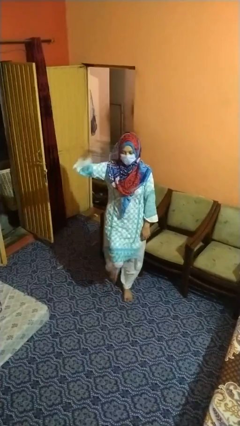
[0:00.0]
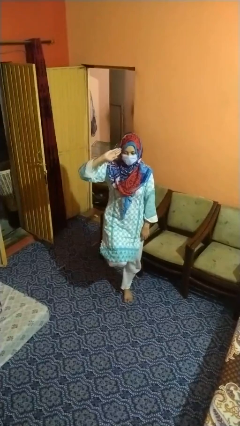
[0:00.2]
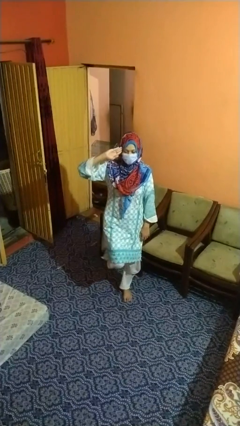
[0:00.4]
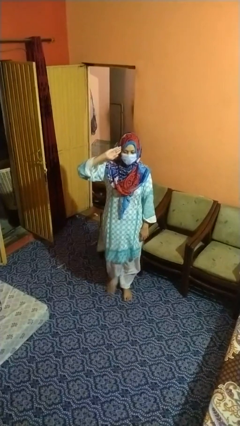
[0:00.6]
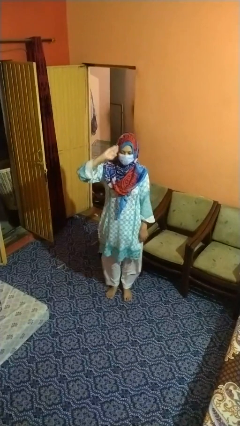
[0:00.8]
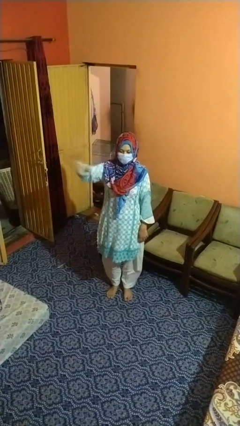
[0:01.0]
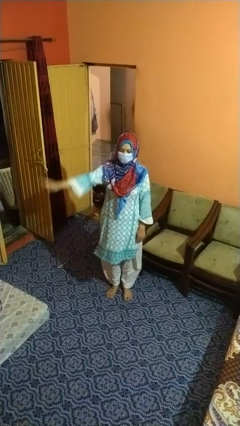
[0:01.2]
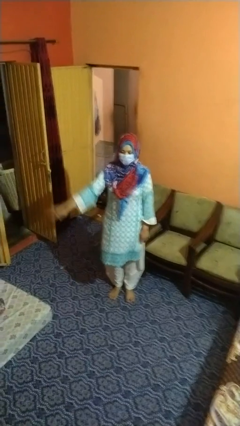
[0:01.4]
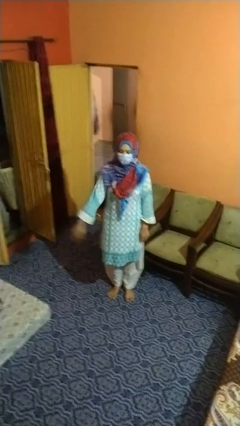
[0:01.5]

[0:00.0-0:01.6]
person salutes

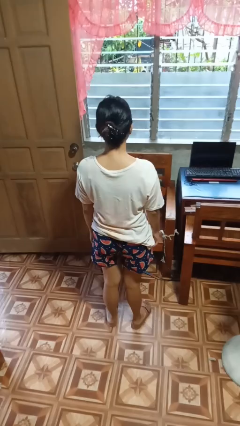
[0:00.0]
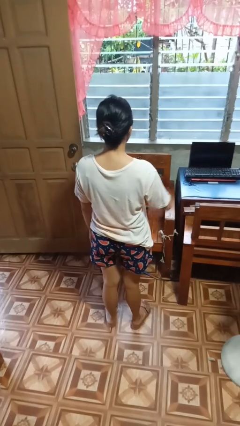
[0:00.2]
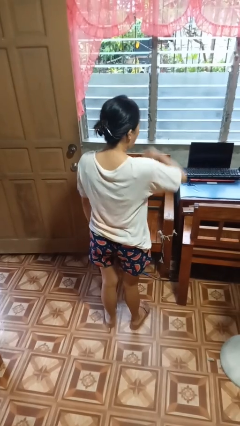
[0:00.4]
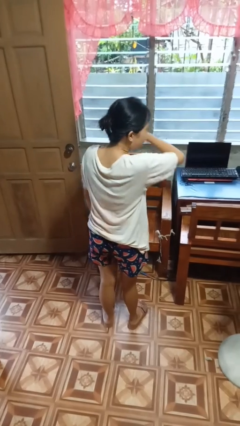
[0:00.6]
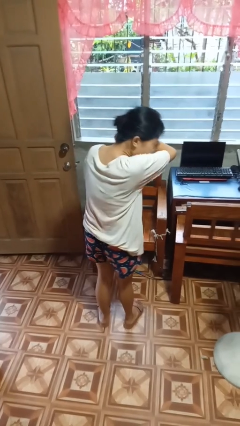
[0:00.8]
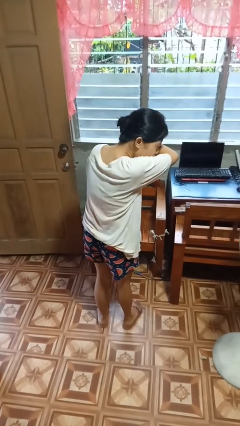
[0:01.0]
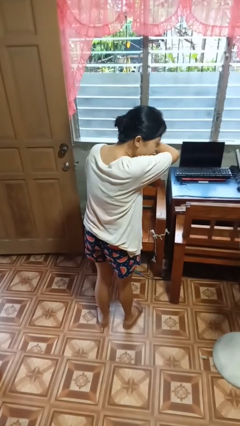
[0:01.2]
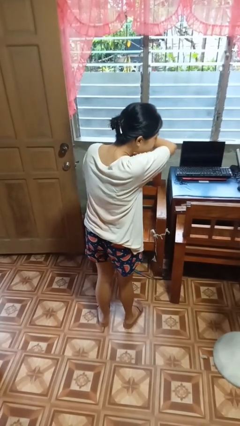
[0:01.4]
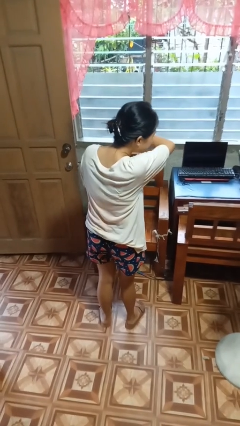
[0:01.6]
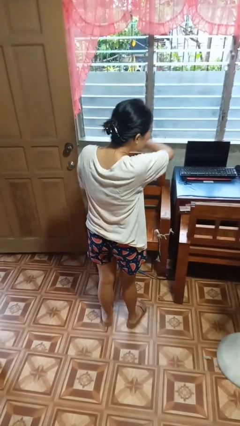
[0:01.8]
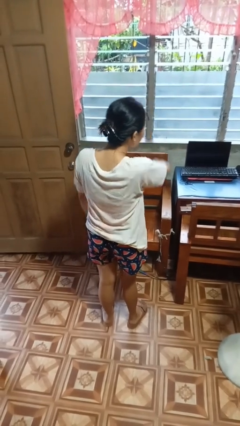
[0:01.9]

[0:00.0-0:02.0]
person sneezes into arm

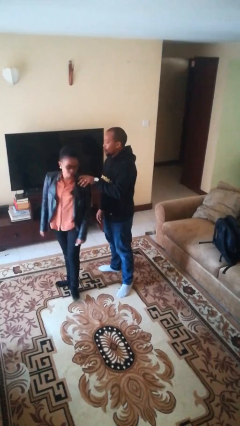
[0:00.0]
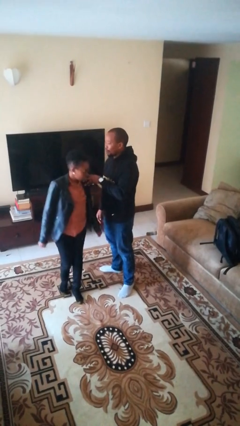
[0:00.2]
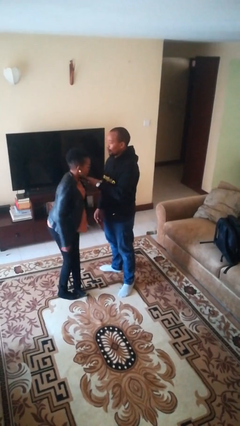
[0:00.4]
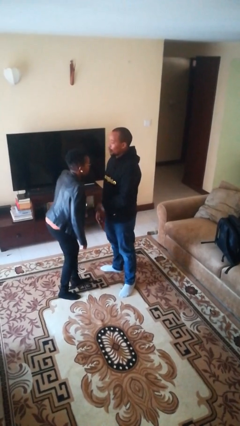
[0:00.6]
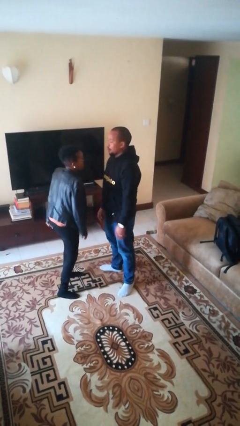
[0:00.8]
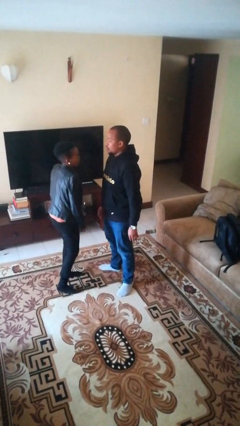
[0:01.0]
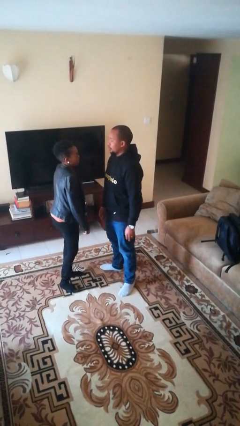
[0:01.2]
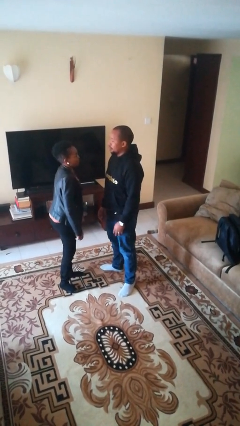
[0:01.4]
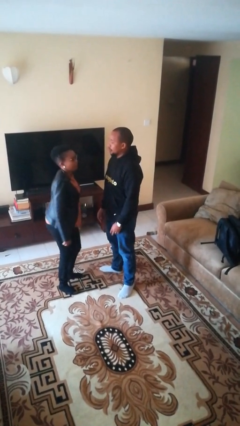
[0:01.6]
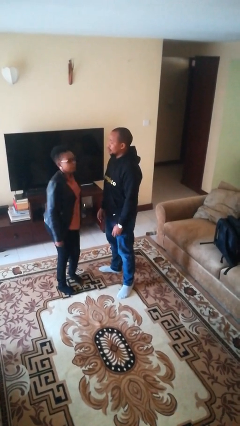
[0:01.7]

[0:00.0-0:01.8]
person spins person around

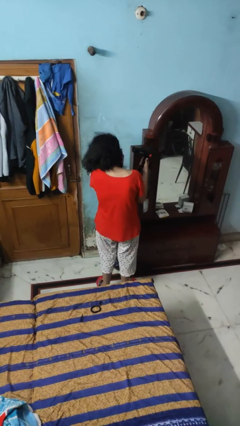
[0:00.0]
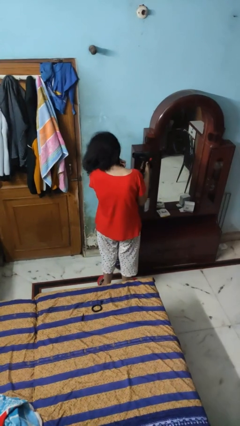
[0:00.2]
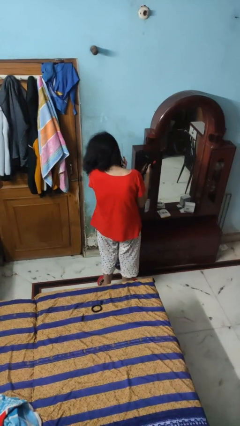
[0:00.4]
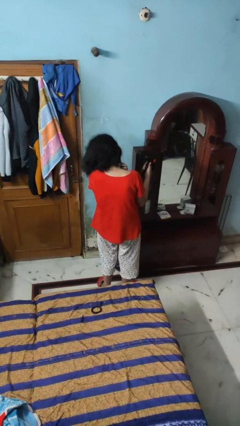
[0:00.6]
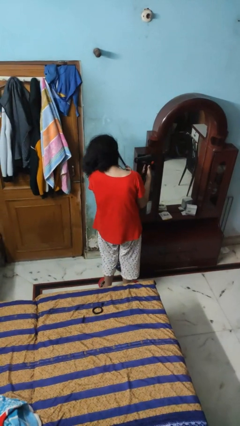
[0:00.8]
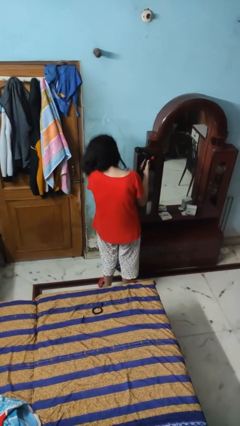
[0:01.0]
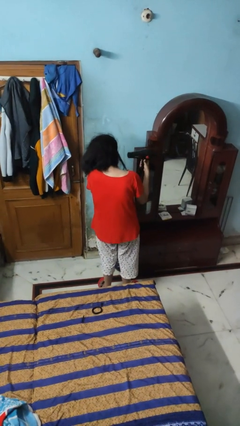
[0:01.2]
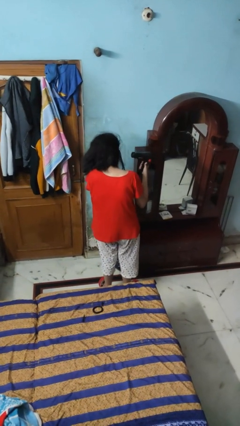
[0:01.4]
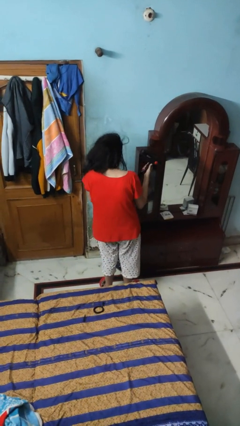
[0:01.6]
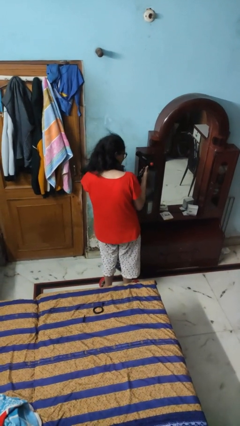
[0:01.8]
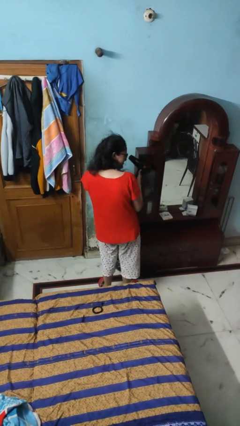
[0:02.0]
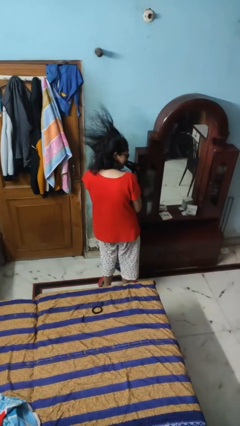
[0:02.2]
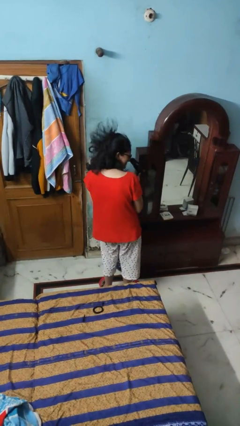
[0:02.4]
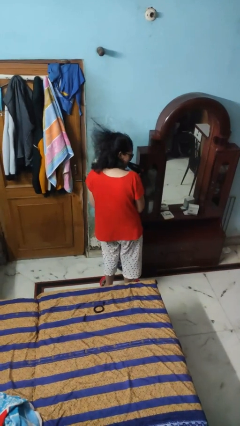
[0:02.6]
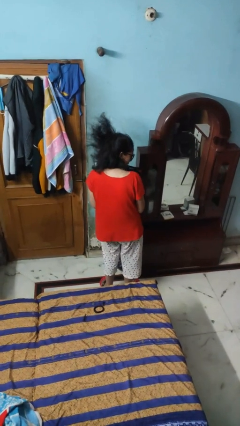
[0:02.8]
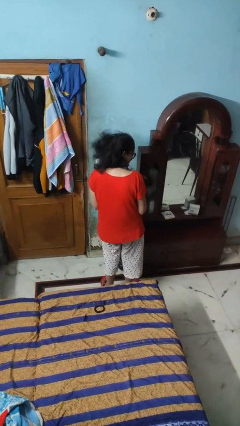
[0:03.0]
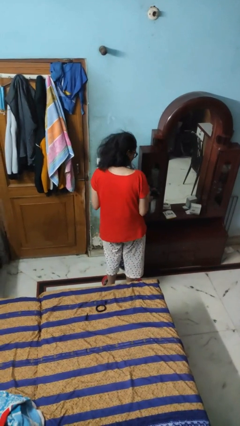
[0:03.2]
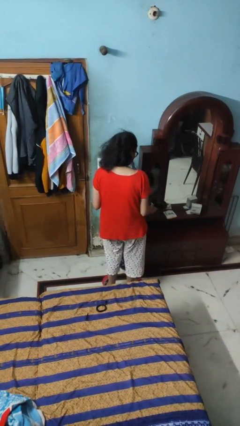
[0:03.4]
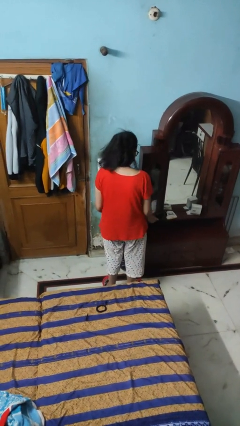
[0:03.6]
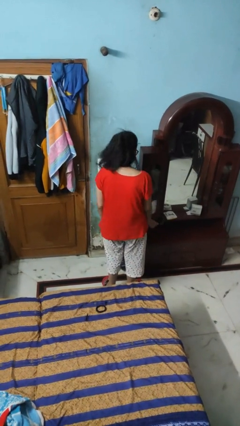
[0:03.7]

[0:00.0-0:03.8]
person dries hair with hairdryer

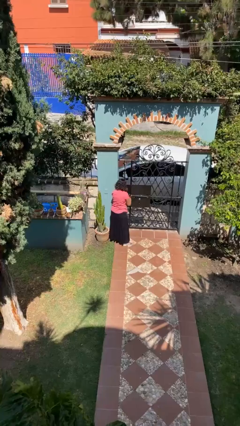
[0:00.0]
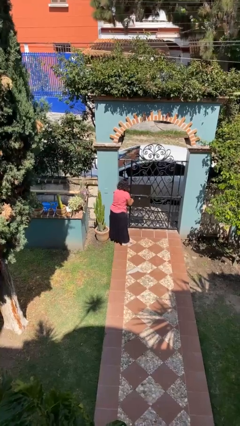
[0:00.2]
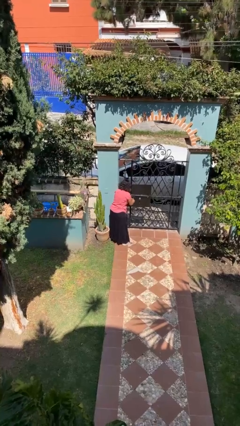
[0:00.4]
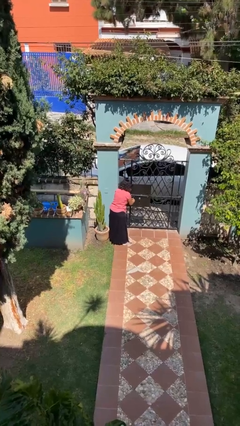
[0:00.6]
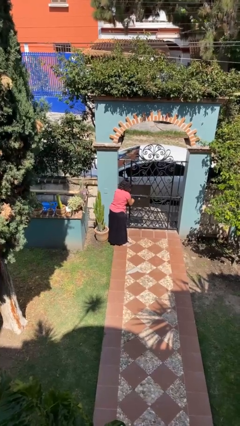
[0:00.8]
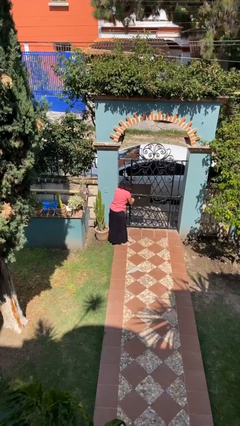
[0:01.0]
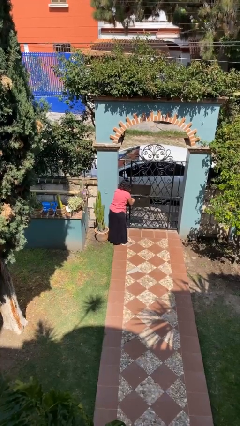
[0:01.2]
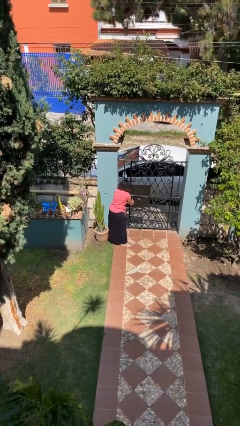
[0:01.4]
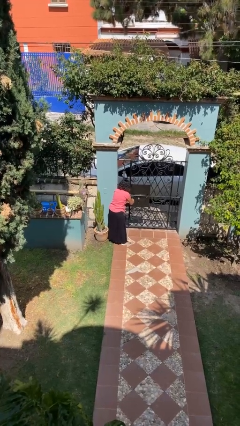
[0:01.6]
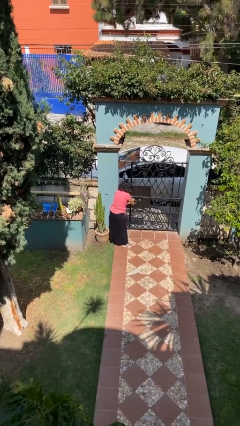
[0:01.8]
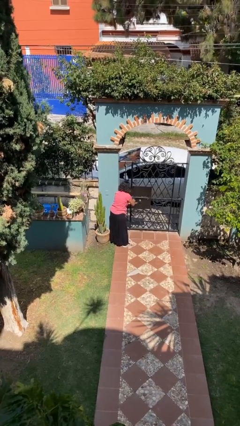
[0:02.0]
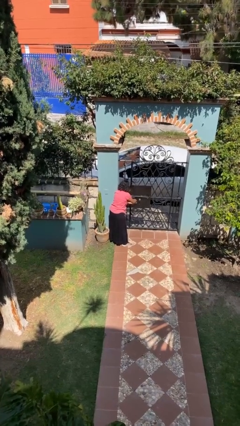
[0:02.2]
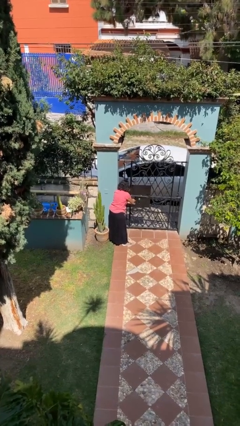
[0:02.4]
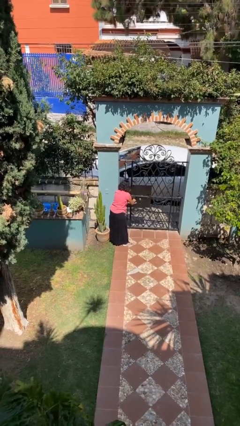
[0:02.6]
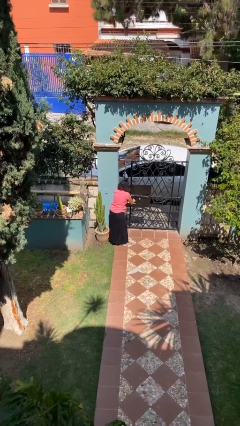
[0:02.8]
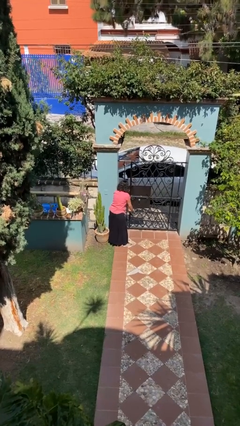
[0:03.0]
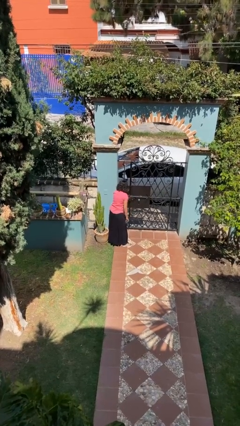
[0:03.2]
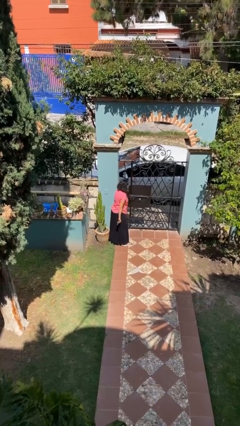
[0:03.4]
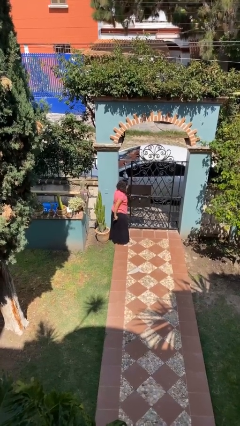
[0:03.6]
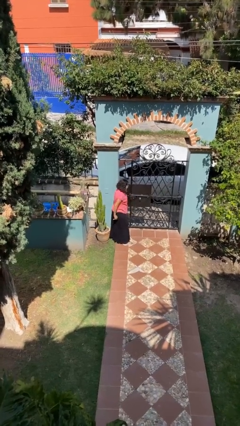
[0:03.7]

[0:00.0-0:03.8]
person locks door with keys

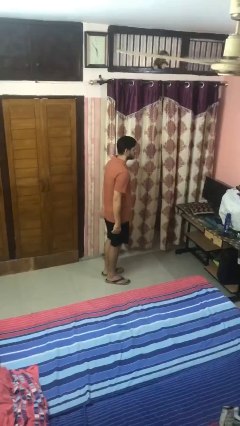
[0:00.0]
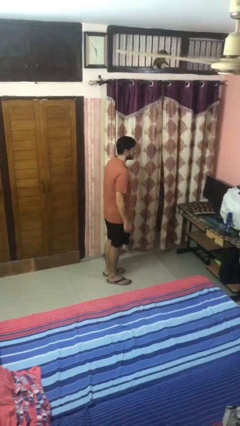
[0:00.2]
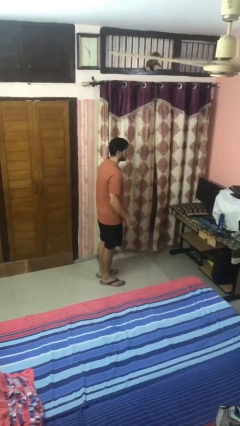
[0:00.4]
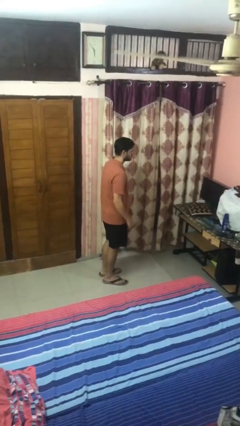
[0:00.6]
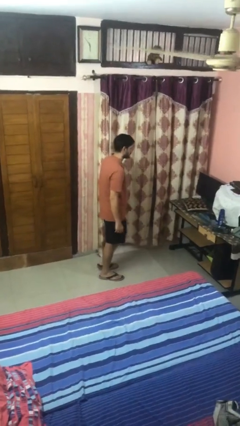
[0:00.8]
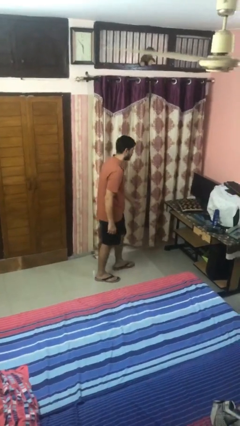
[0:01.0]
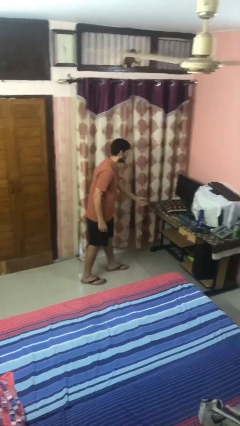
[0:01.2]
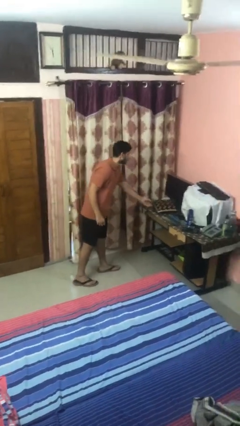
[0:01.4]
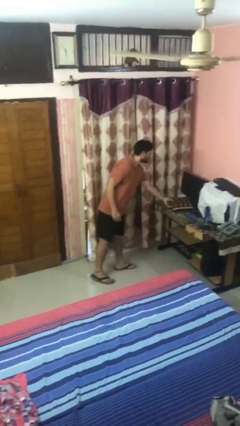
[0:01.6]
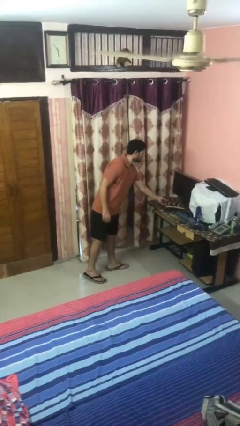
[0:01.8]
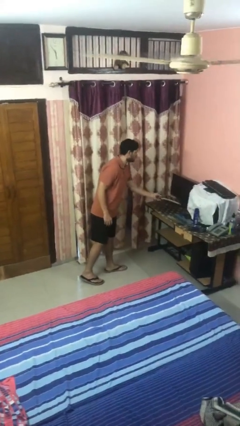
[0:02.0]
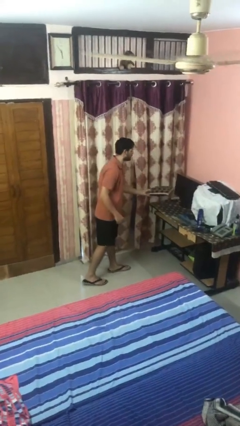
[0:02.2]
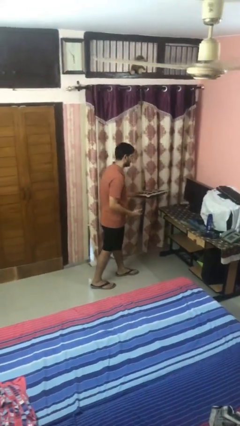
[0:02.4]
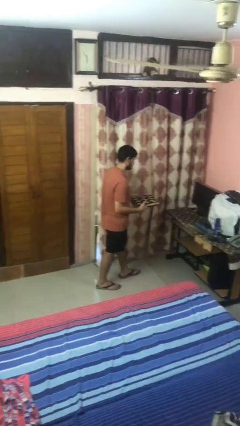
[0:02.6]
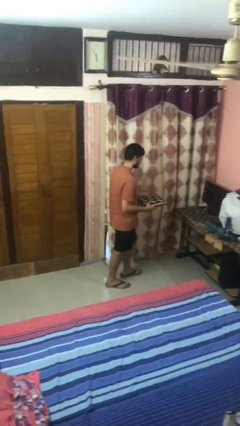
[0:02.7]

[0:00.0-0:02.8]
person picks up object from table

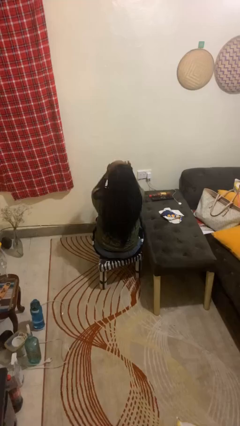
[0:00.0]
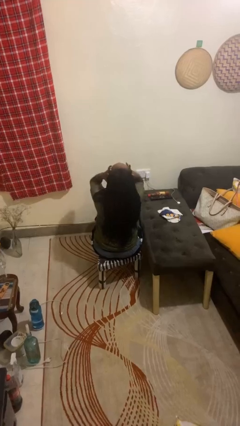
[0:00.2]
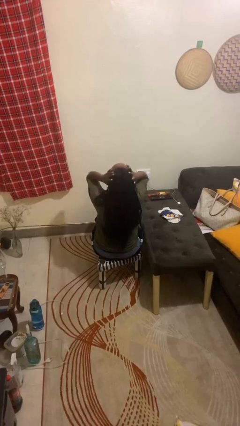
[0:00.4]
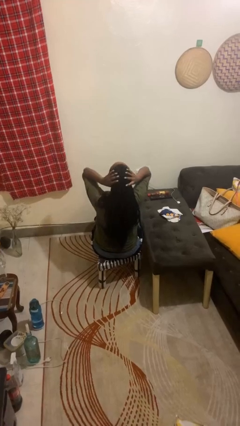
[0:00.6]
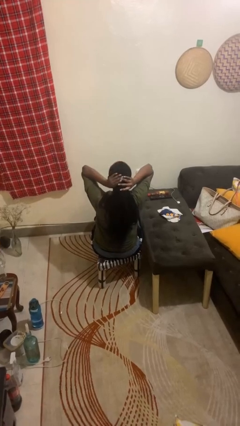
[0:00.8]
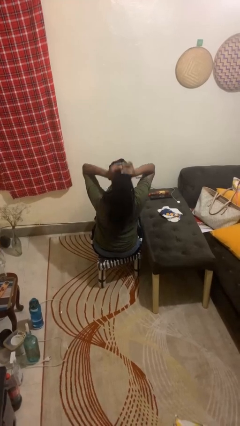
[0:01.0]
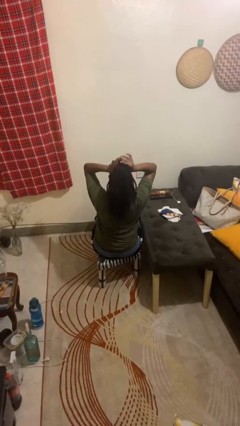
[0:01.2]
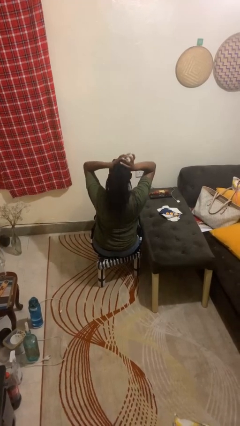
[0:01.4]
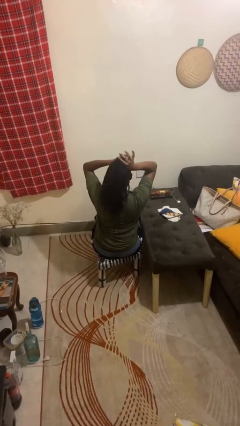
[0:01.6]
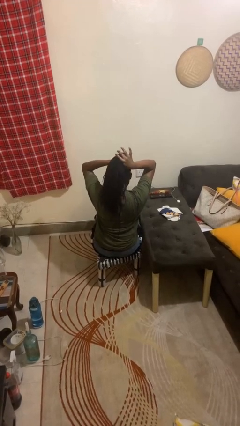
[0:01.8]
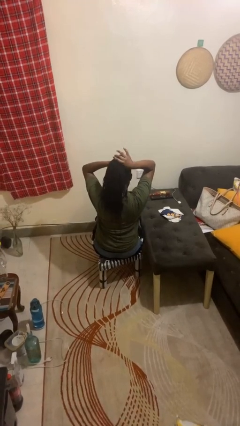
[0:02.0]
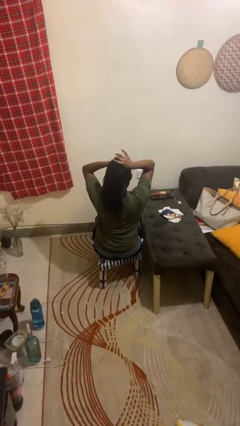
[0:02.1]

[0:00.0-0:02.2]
person puts hair in ponytail
